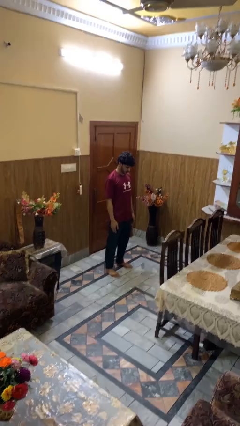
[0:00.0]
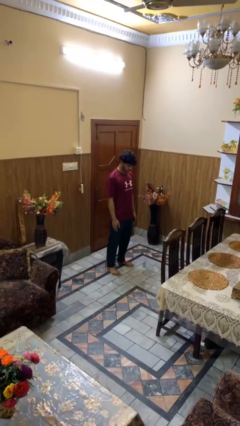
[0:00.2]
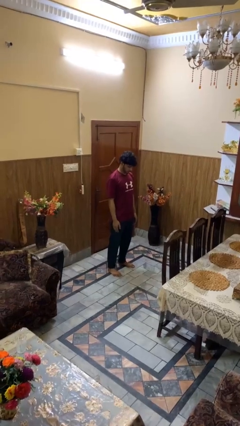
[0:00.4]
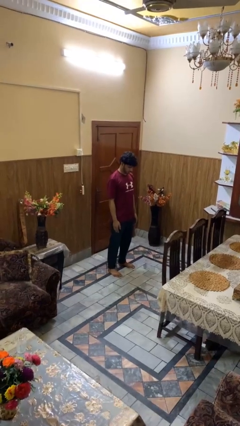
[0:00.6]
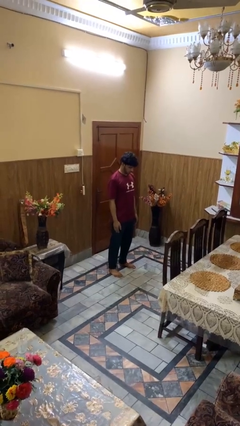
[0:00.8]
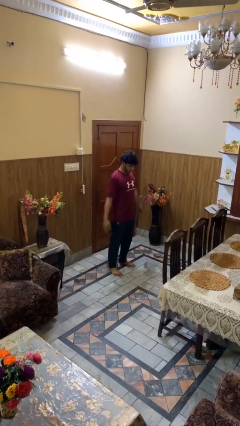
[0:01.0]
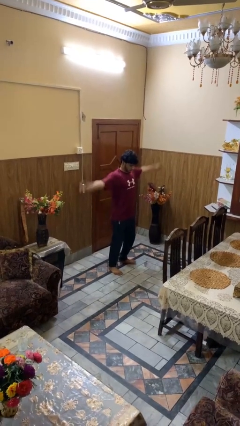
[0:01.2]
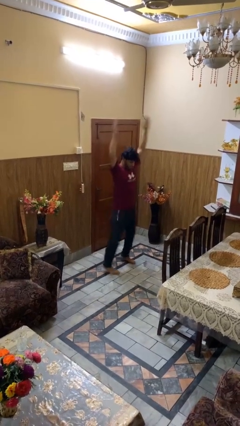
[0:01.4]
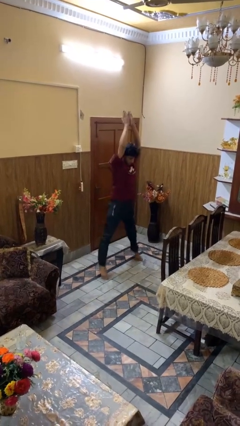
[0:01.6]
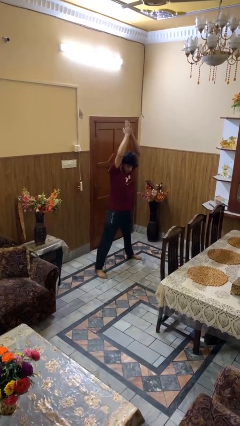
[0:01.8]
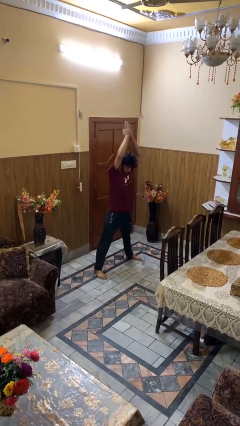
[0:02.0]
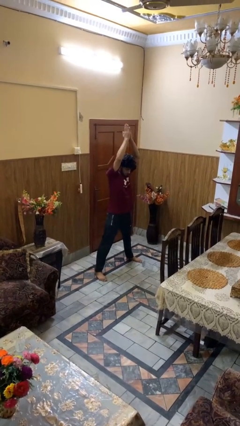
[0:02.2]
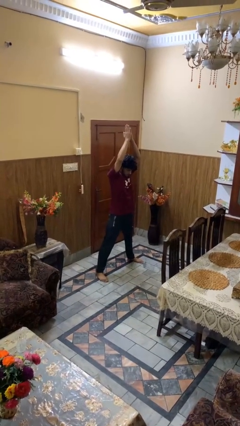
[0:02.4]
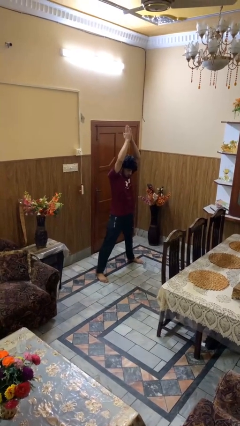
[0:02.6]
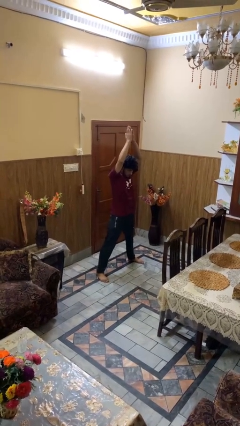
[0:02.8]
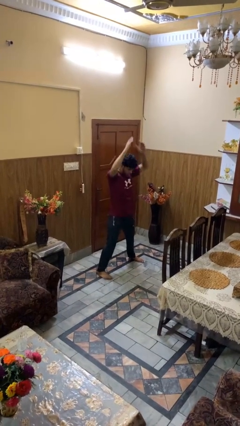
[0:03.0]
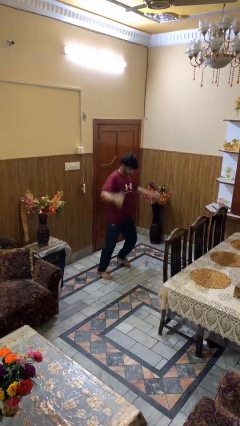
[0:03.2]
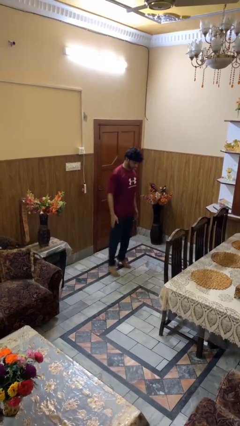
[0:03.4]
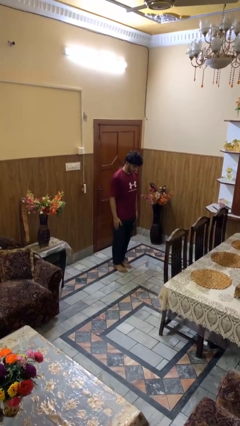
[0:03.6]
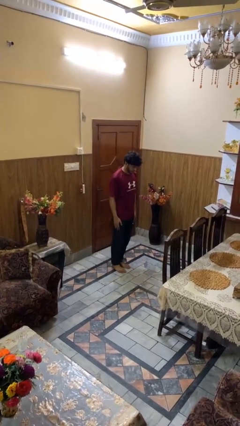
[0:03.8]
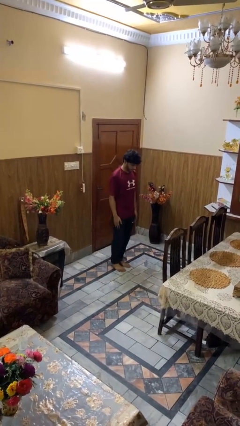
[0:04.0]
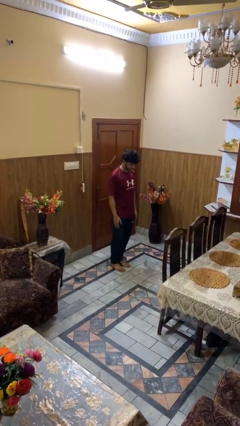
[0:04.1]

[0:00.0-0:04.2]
person exercises with jumping jacks

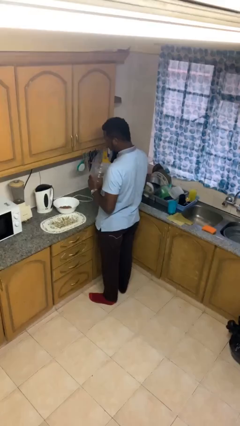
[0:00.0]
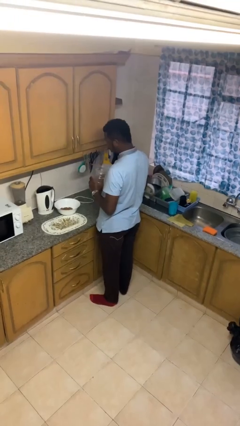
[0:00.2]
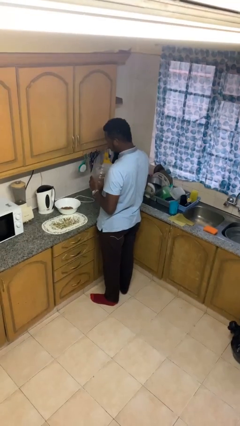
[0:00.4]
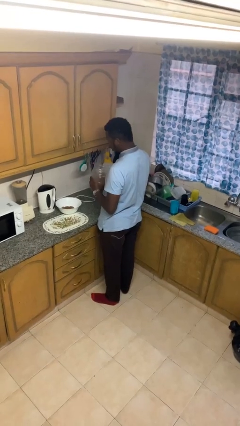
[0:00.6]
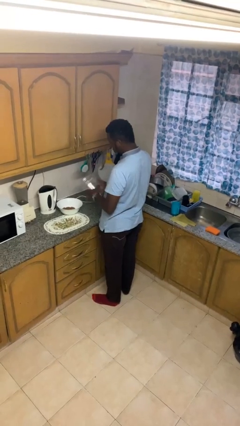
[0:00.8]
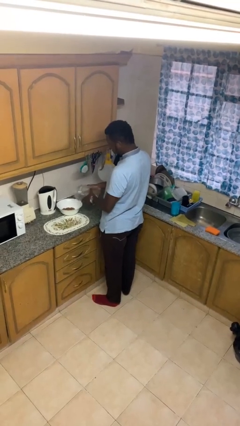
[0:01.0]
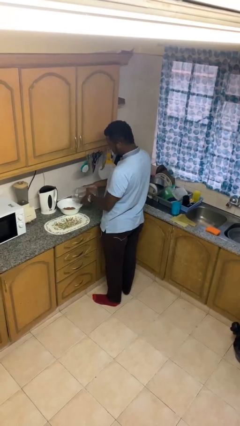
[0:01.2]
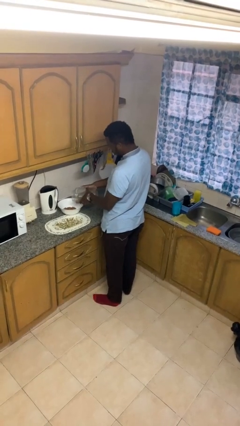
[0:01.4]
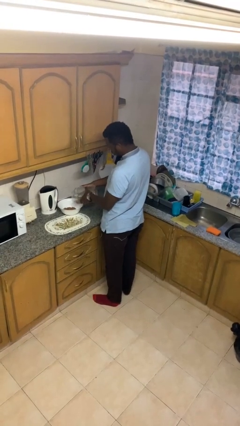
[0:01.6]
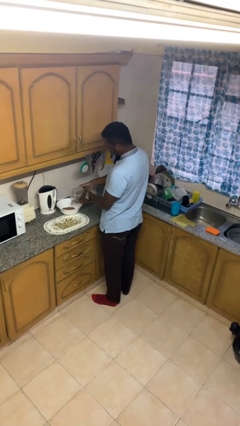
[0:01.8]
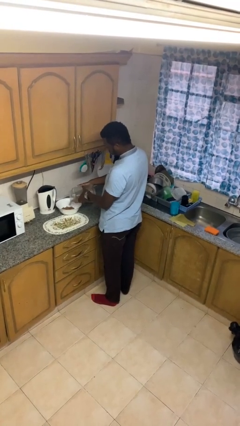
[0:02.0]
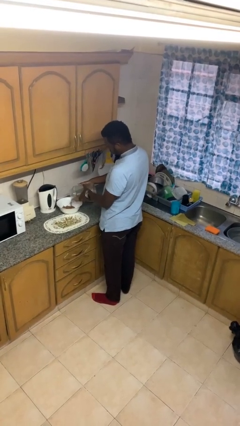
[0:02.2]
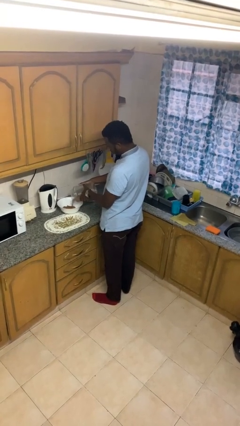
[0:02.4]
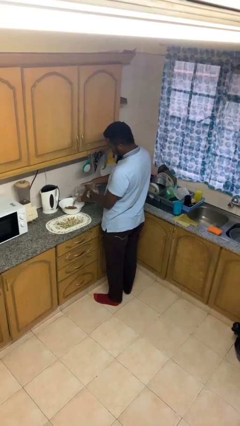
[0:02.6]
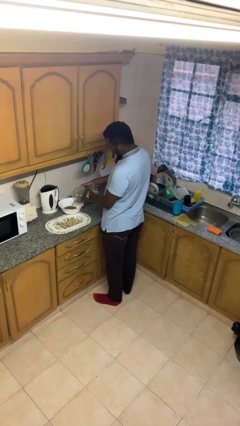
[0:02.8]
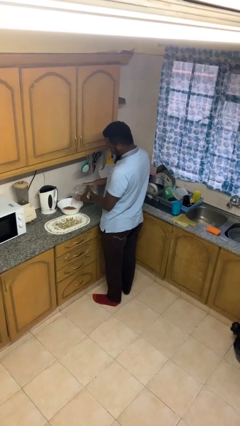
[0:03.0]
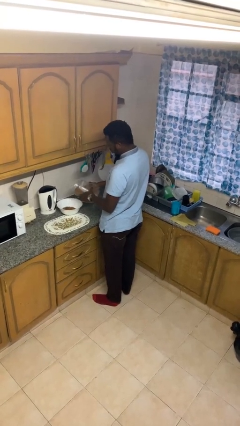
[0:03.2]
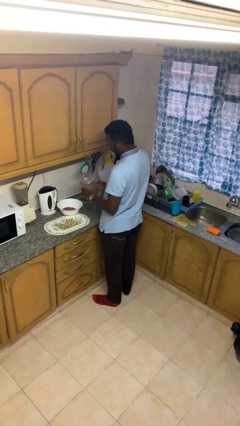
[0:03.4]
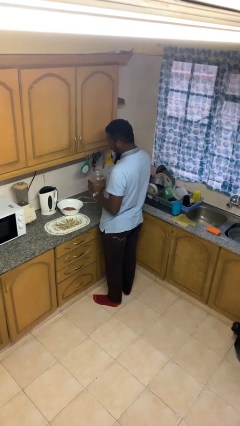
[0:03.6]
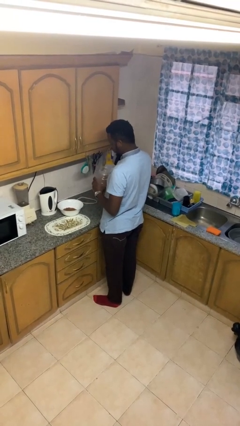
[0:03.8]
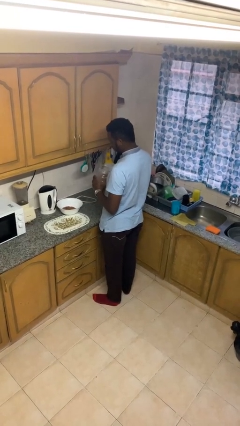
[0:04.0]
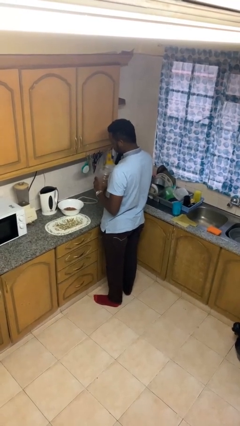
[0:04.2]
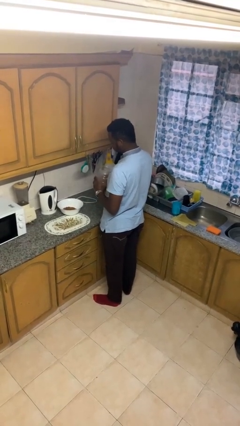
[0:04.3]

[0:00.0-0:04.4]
person pours into bowl

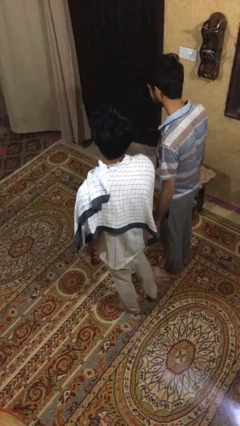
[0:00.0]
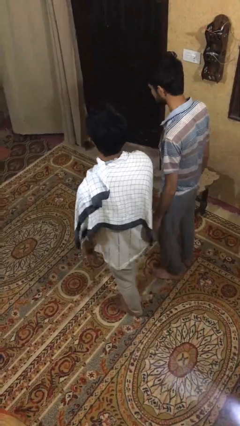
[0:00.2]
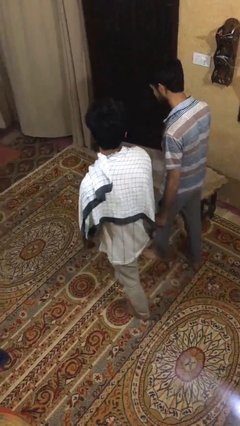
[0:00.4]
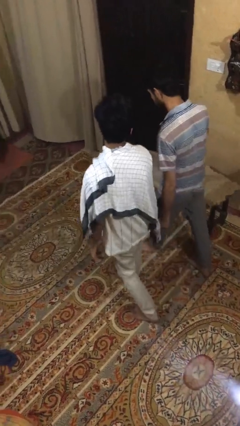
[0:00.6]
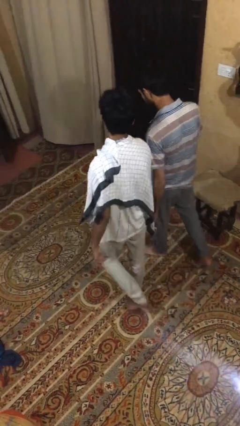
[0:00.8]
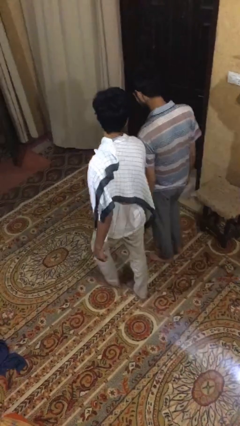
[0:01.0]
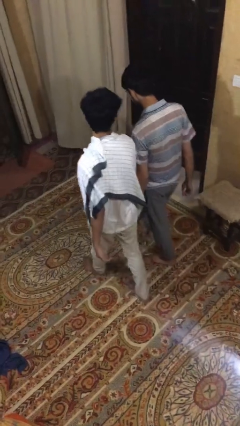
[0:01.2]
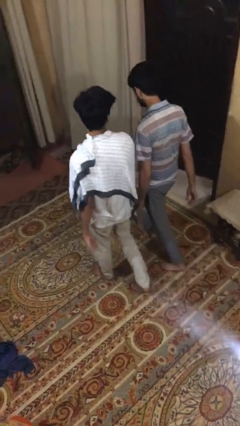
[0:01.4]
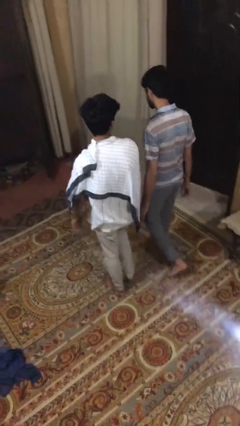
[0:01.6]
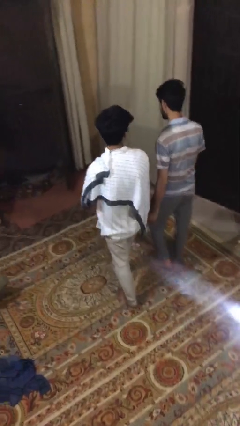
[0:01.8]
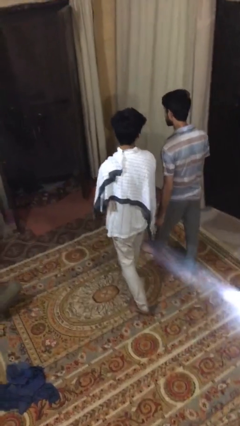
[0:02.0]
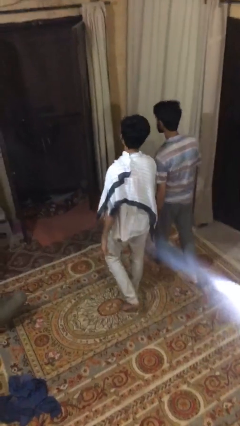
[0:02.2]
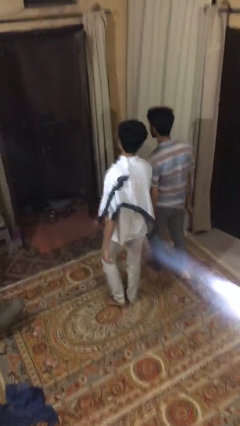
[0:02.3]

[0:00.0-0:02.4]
person holds hand

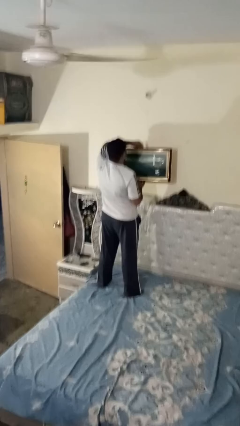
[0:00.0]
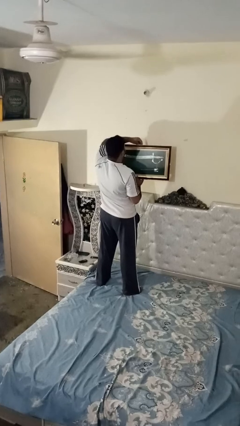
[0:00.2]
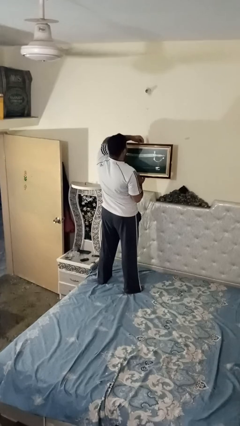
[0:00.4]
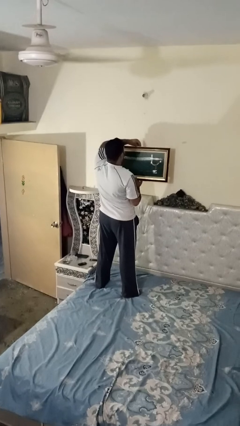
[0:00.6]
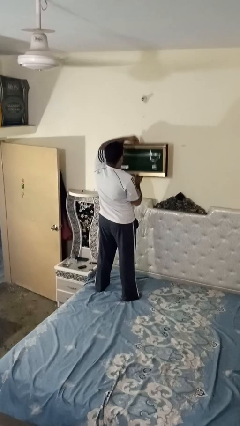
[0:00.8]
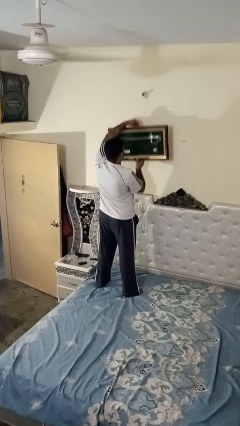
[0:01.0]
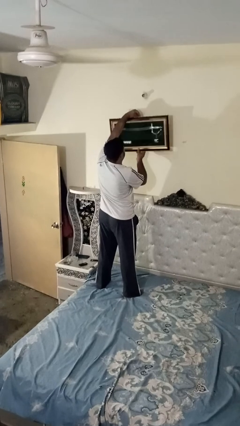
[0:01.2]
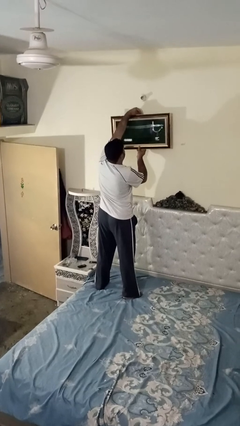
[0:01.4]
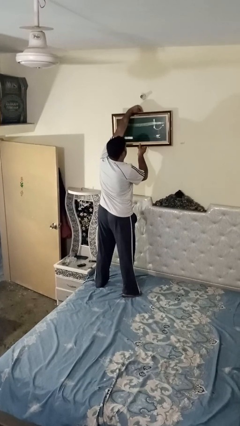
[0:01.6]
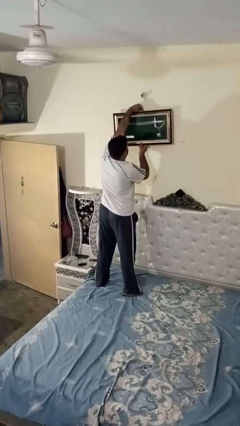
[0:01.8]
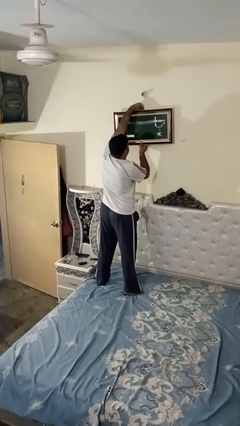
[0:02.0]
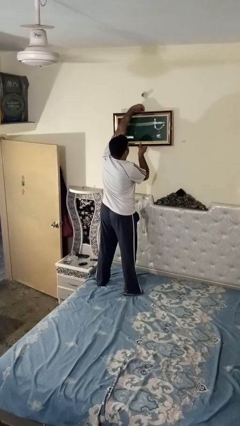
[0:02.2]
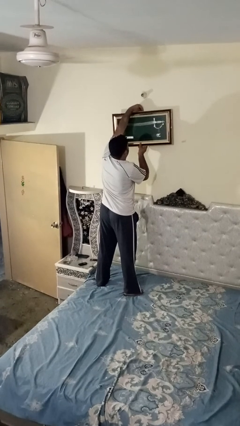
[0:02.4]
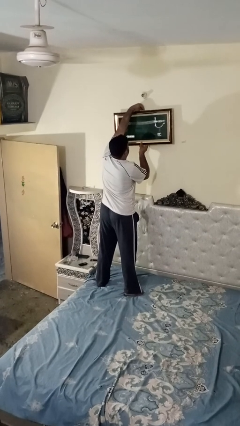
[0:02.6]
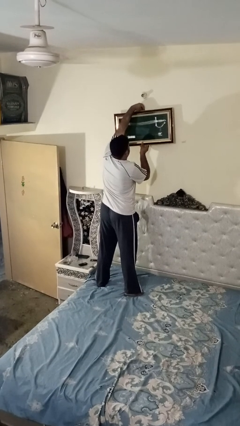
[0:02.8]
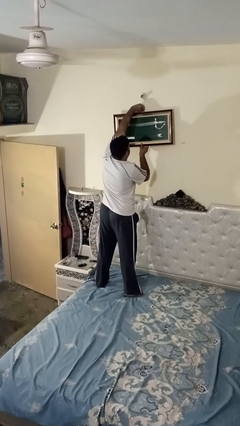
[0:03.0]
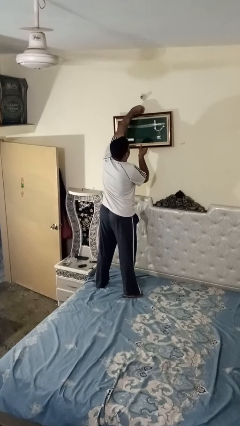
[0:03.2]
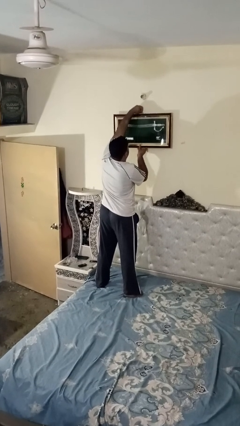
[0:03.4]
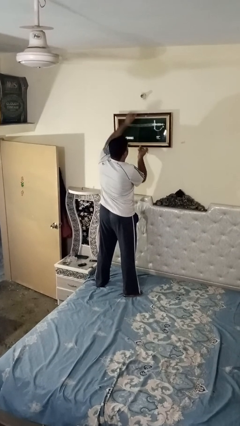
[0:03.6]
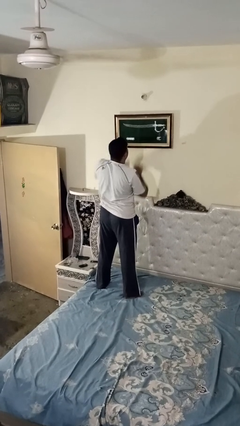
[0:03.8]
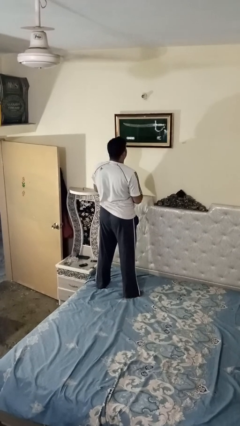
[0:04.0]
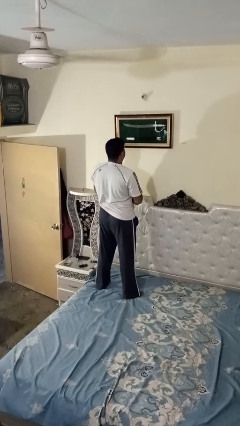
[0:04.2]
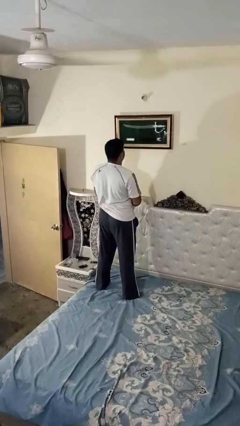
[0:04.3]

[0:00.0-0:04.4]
person puts up picture frame

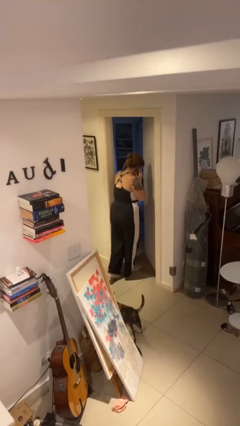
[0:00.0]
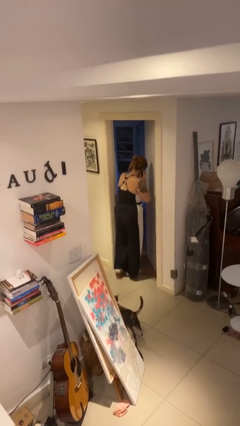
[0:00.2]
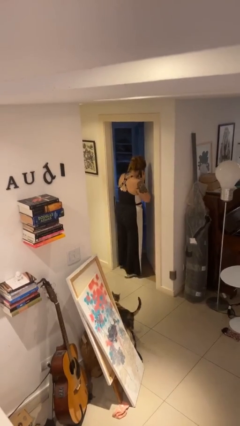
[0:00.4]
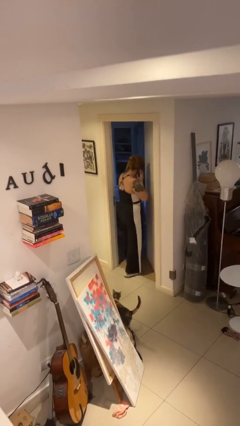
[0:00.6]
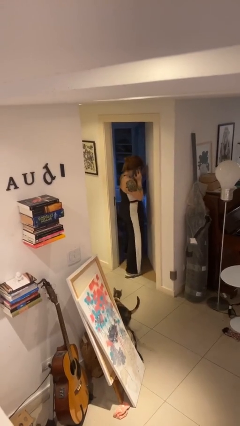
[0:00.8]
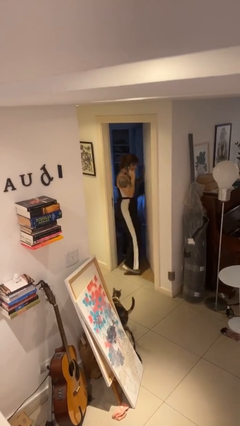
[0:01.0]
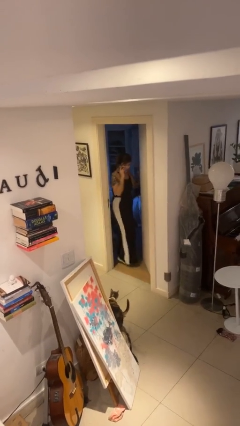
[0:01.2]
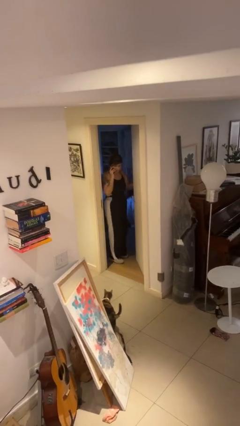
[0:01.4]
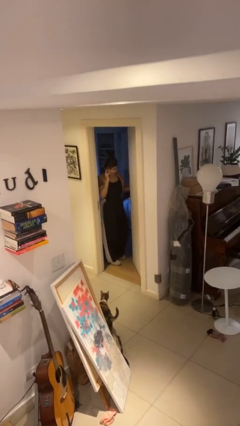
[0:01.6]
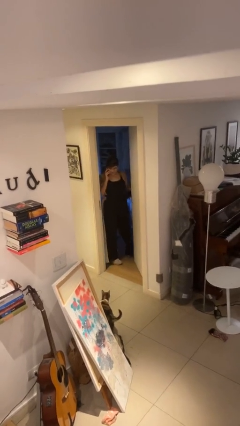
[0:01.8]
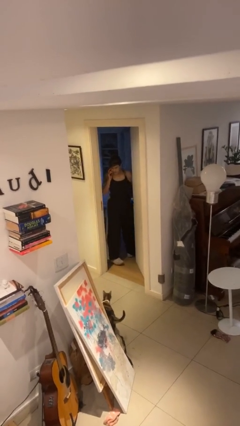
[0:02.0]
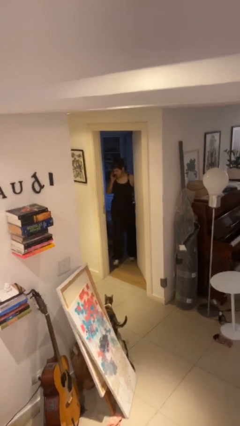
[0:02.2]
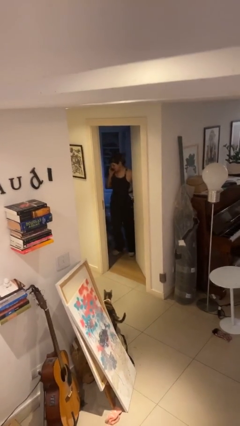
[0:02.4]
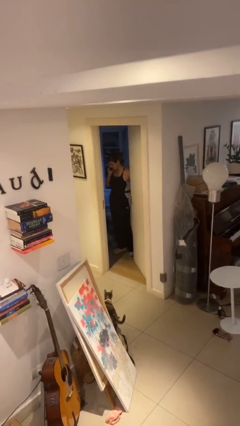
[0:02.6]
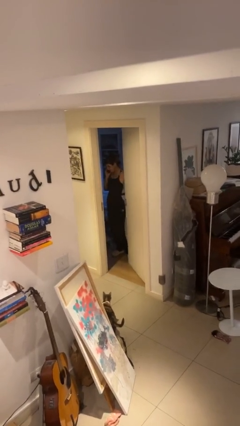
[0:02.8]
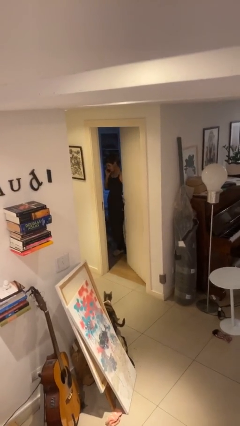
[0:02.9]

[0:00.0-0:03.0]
person exits scene through structure
